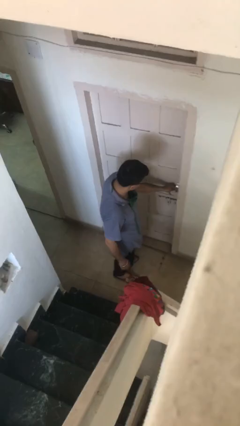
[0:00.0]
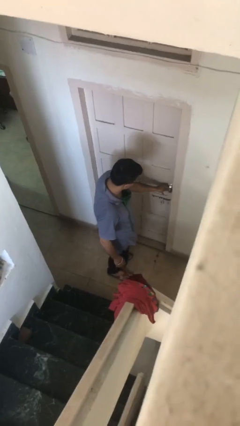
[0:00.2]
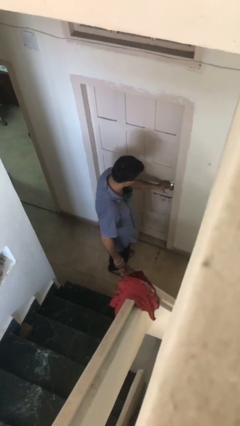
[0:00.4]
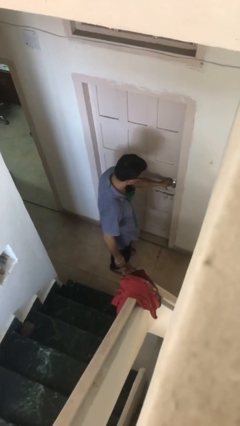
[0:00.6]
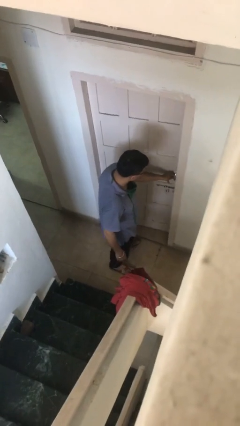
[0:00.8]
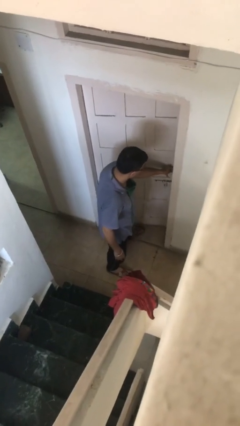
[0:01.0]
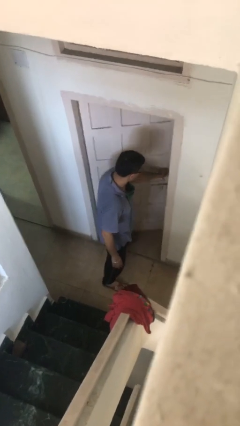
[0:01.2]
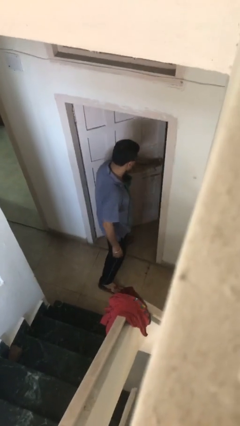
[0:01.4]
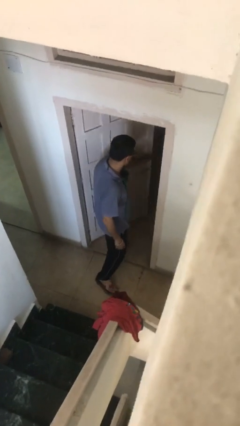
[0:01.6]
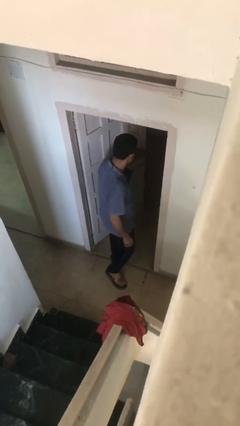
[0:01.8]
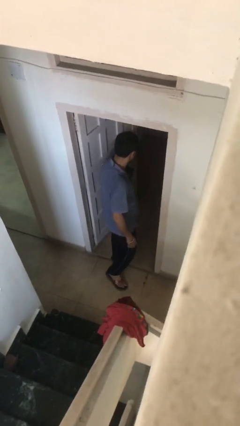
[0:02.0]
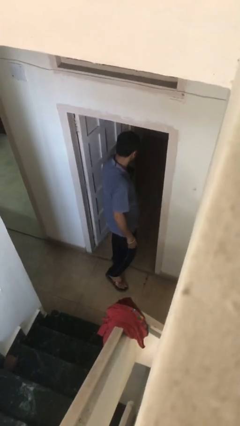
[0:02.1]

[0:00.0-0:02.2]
person opens facility door

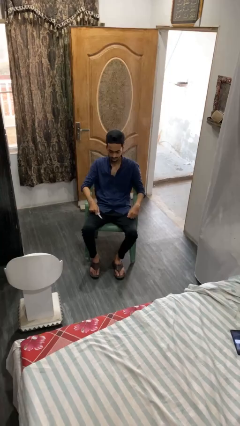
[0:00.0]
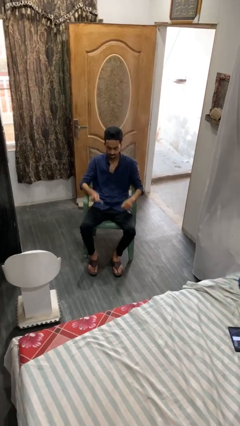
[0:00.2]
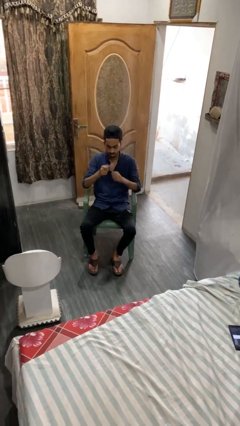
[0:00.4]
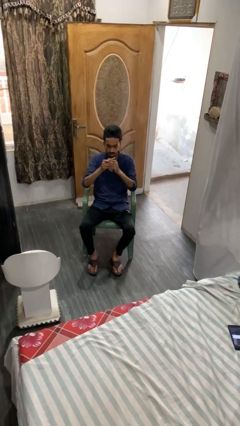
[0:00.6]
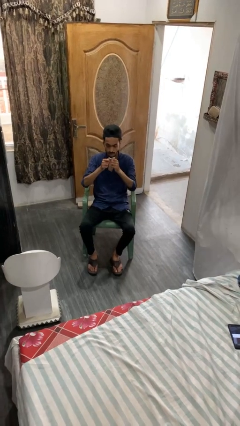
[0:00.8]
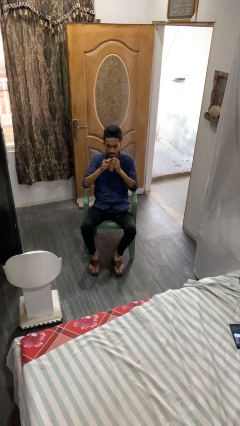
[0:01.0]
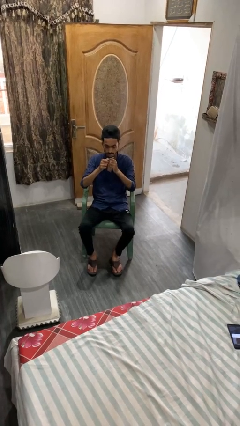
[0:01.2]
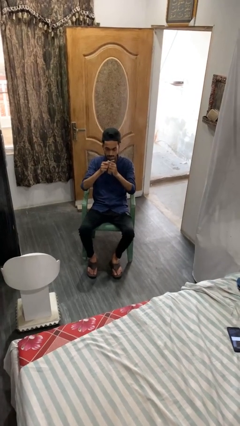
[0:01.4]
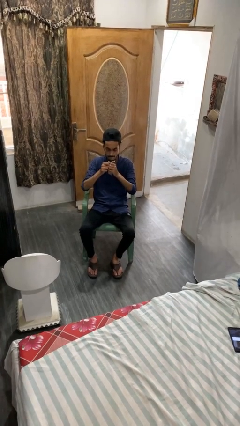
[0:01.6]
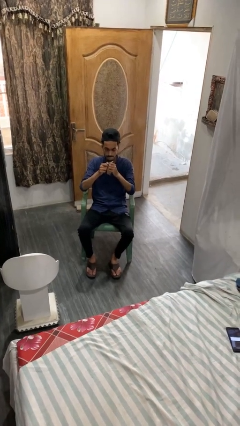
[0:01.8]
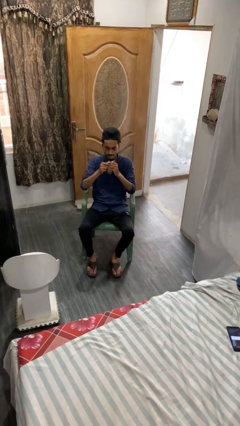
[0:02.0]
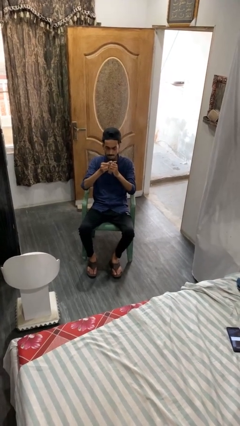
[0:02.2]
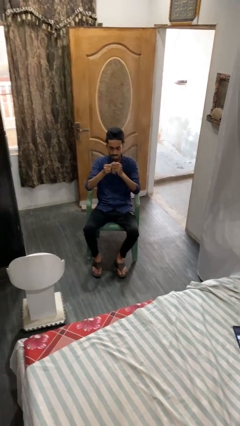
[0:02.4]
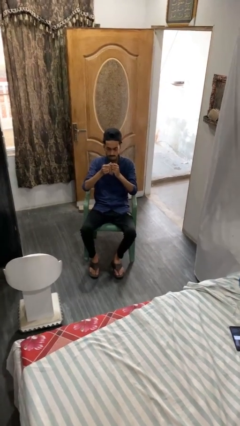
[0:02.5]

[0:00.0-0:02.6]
person files fingernails

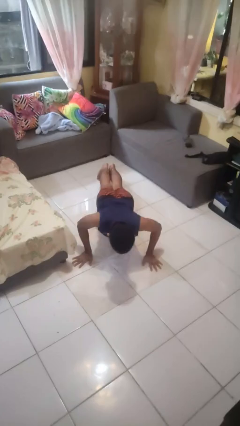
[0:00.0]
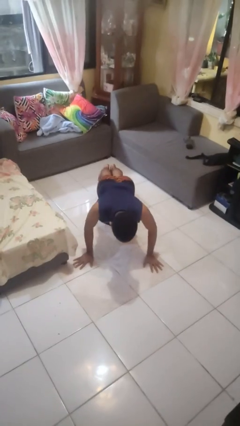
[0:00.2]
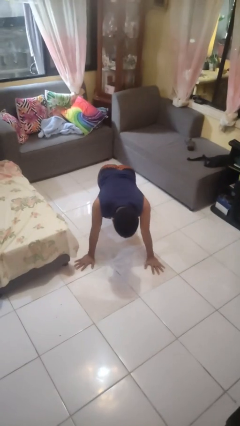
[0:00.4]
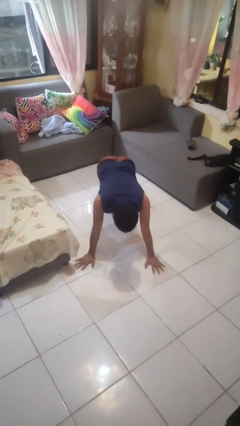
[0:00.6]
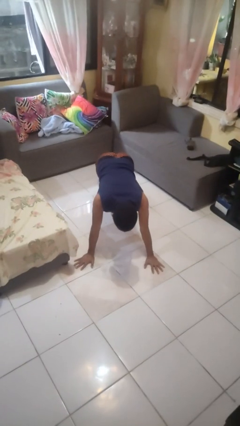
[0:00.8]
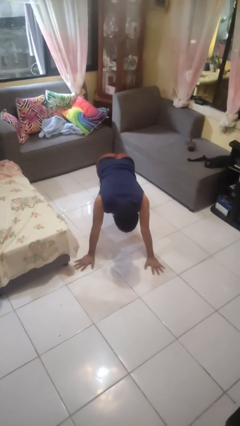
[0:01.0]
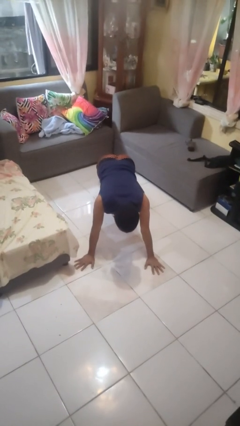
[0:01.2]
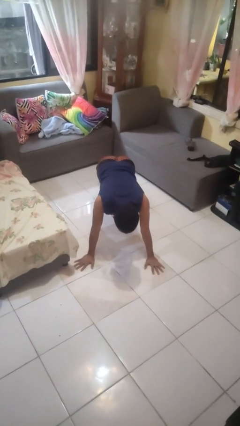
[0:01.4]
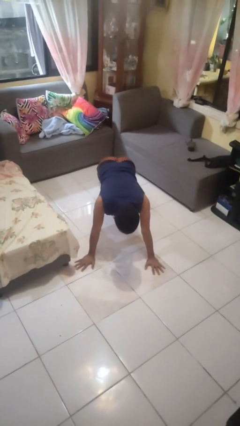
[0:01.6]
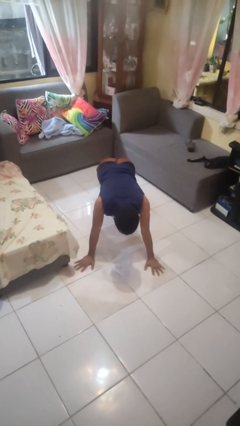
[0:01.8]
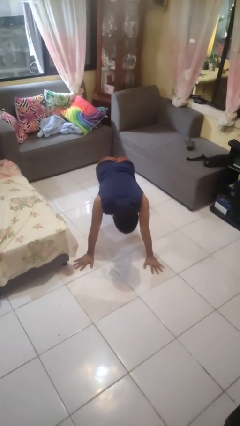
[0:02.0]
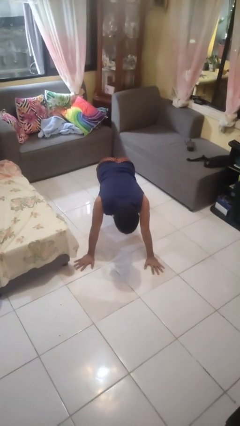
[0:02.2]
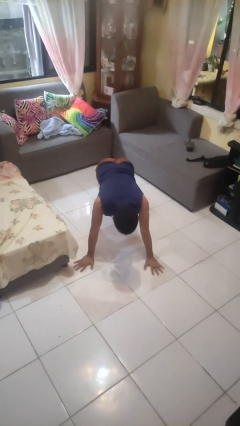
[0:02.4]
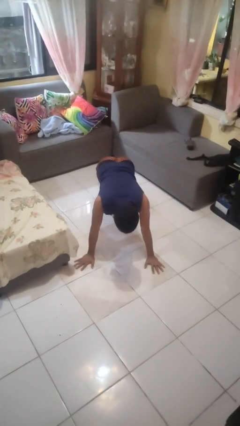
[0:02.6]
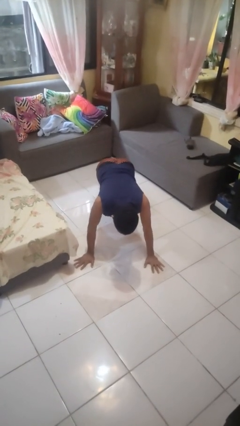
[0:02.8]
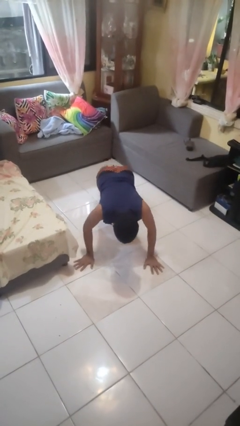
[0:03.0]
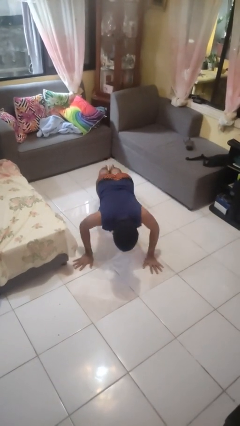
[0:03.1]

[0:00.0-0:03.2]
person exercises with pushup

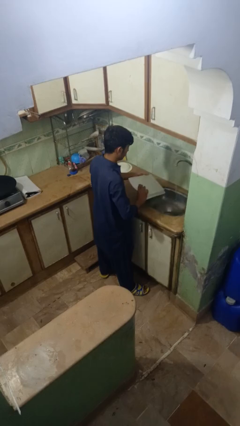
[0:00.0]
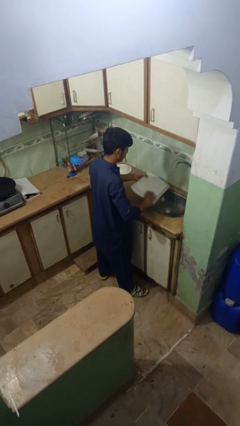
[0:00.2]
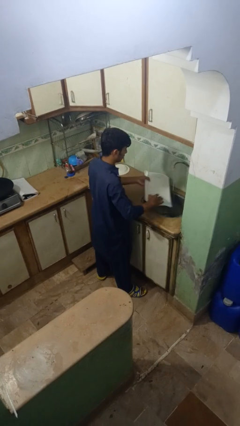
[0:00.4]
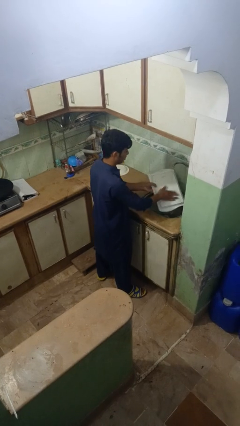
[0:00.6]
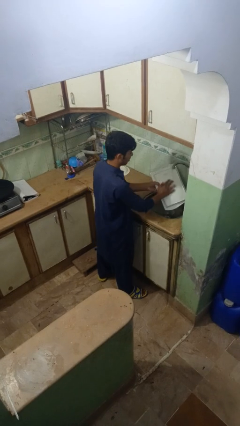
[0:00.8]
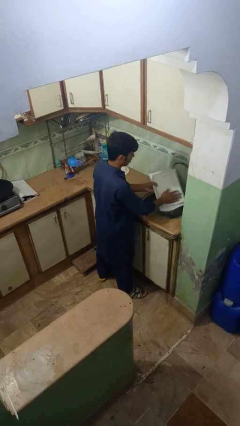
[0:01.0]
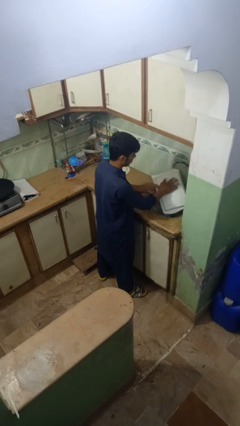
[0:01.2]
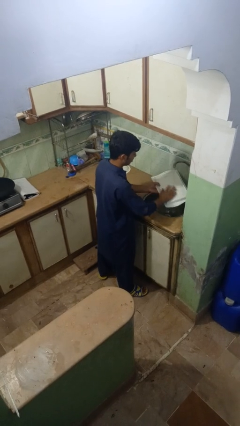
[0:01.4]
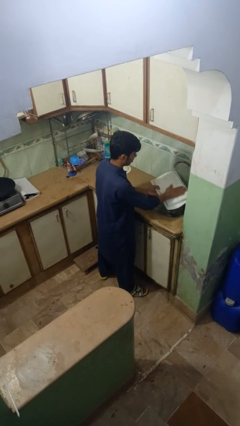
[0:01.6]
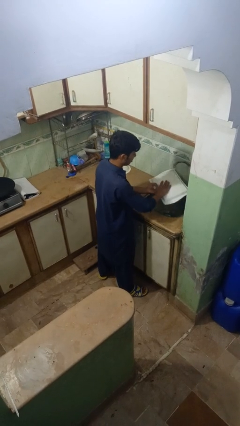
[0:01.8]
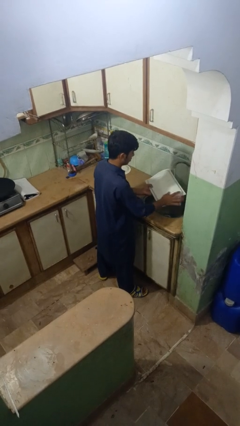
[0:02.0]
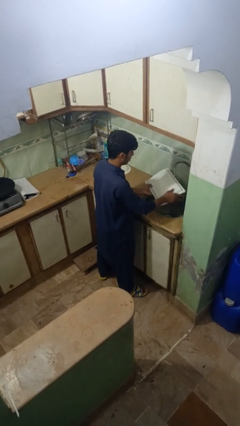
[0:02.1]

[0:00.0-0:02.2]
person washes dish

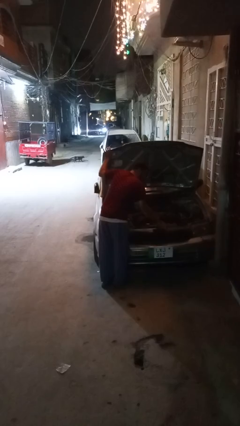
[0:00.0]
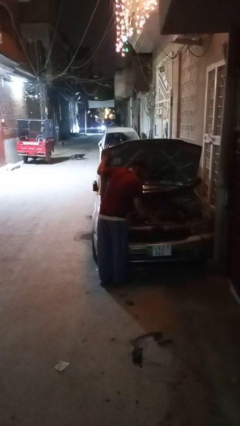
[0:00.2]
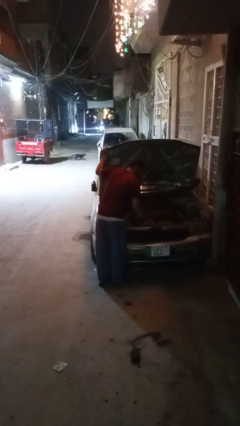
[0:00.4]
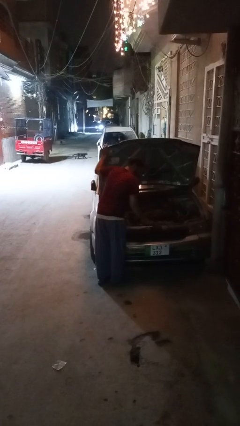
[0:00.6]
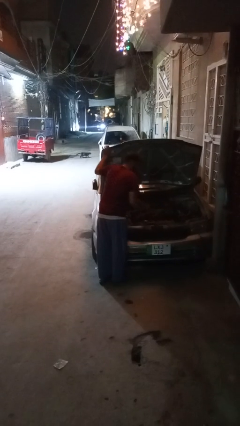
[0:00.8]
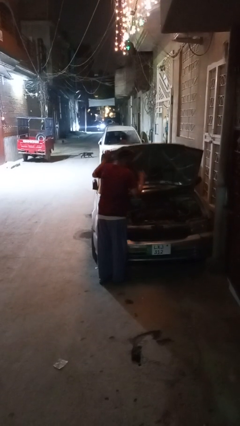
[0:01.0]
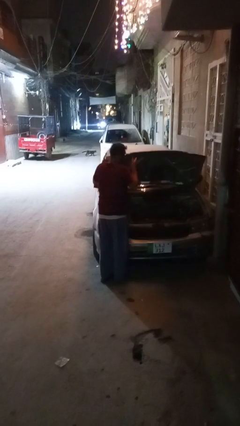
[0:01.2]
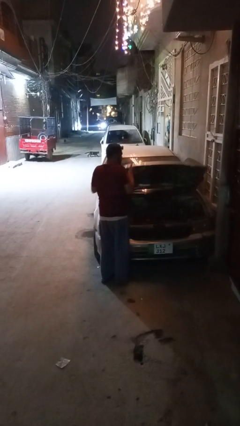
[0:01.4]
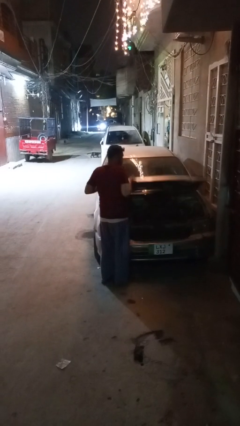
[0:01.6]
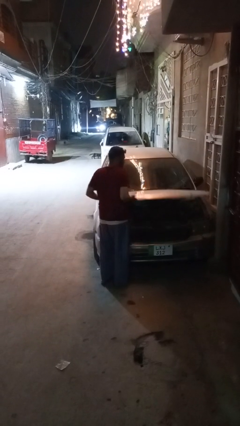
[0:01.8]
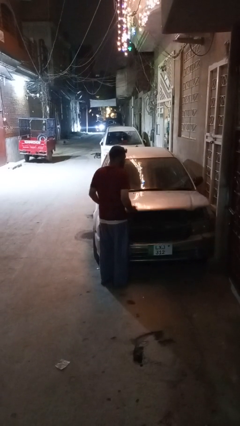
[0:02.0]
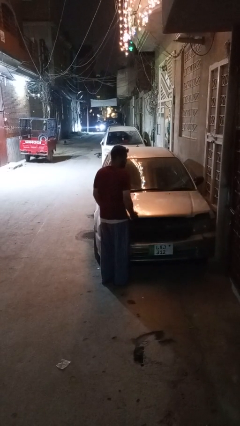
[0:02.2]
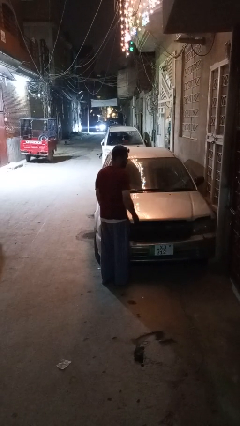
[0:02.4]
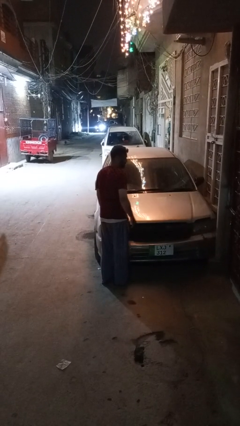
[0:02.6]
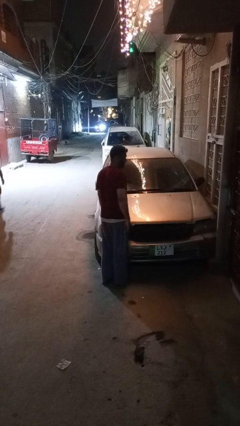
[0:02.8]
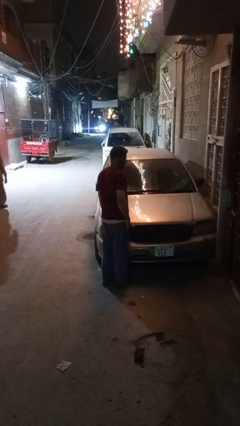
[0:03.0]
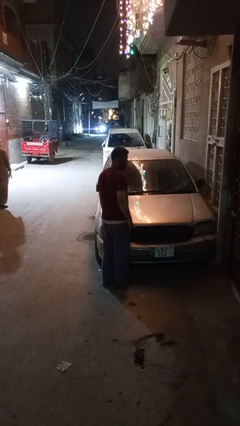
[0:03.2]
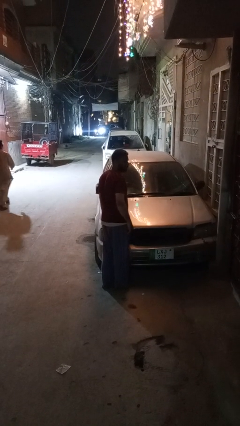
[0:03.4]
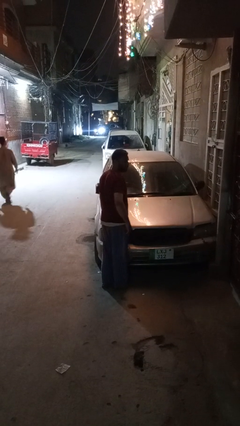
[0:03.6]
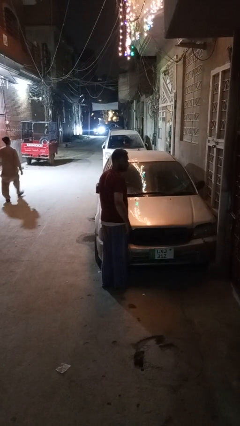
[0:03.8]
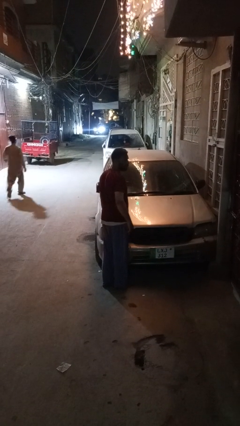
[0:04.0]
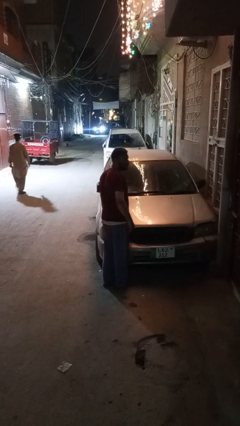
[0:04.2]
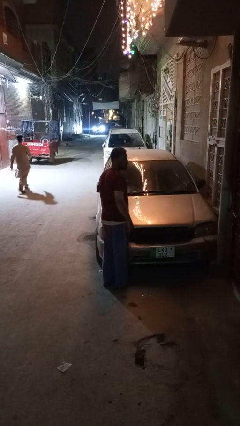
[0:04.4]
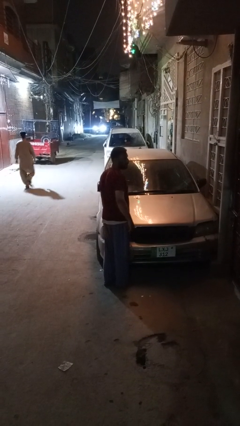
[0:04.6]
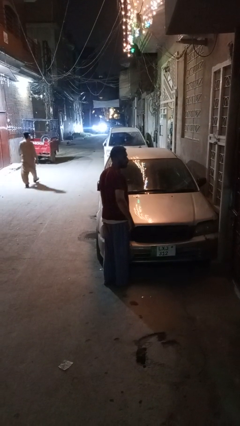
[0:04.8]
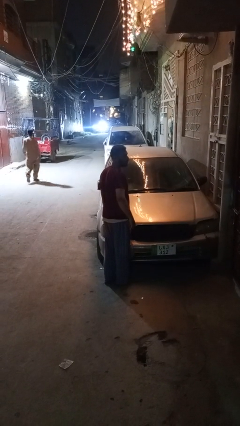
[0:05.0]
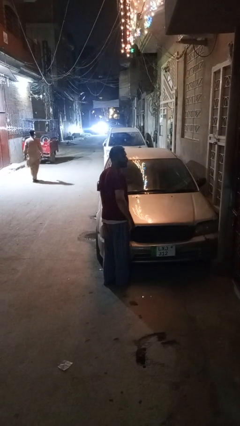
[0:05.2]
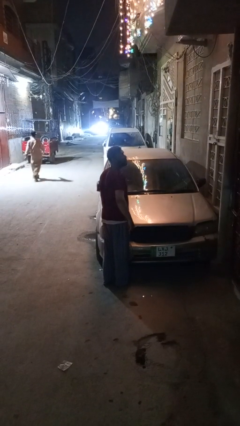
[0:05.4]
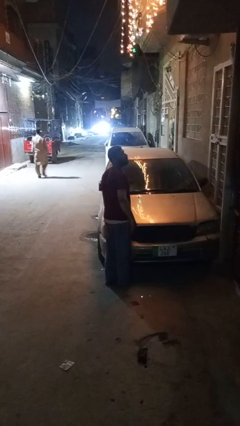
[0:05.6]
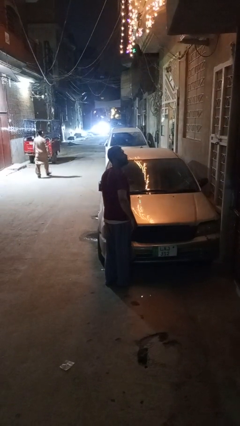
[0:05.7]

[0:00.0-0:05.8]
person closes car hood

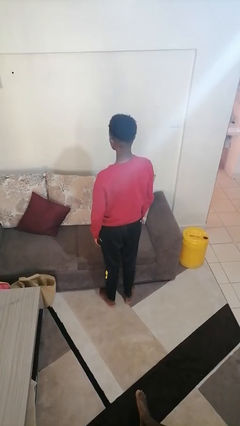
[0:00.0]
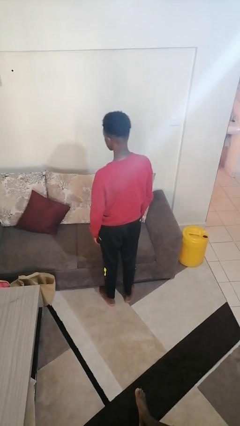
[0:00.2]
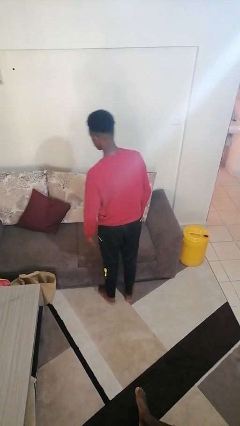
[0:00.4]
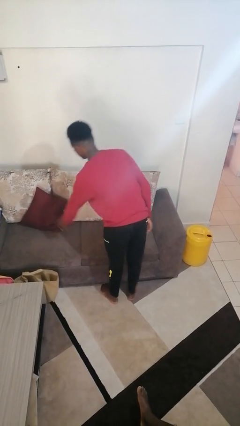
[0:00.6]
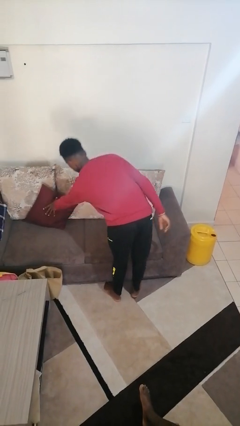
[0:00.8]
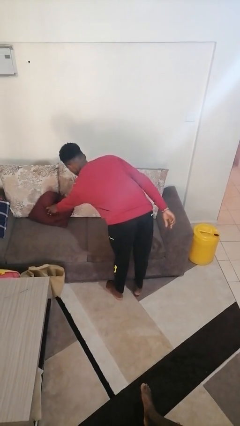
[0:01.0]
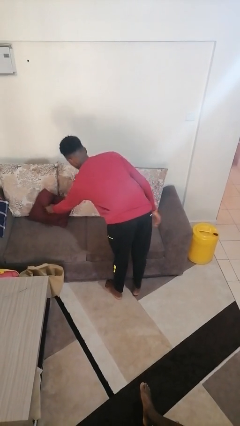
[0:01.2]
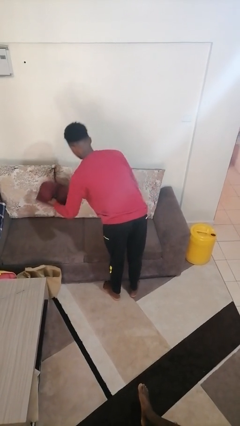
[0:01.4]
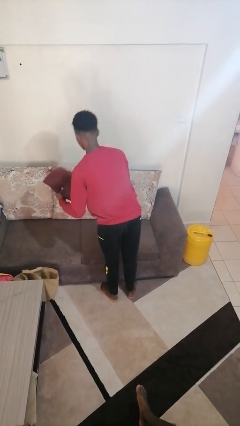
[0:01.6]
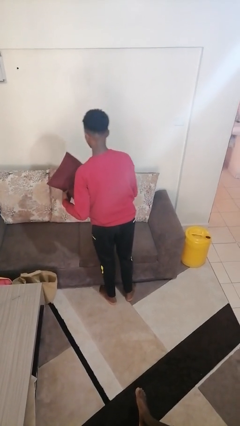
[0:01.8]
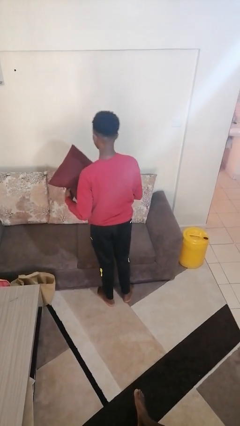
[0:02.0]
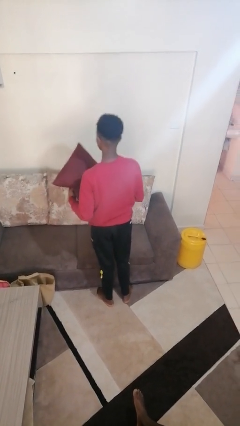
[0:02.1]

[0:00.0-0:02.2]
person picks up object from couch
